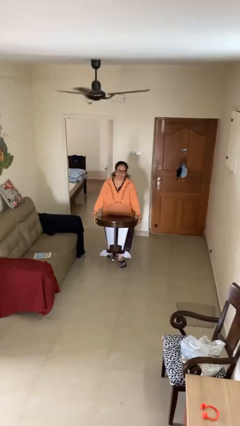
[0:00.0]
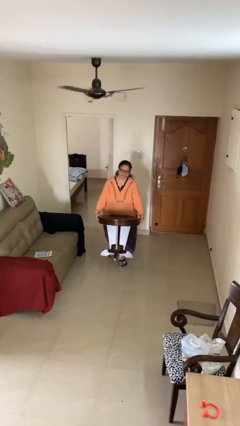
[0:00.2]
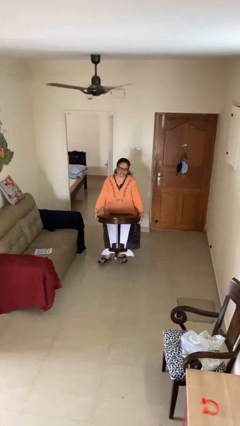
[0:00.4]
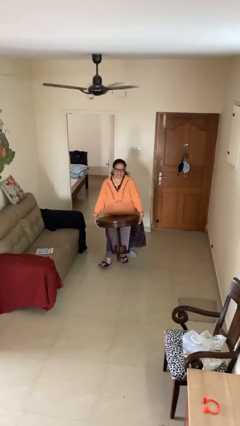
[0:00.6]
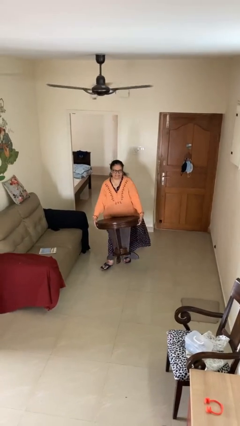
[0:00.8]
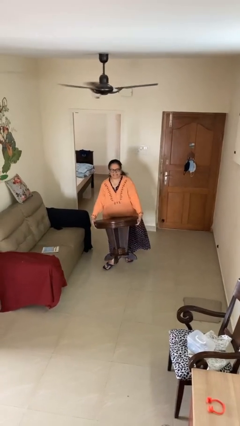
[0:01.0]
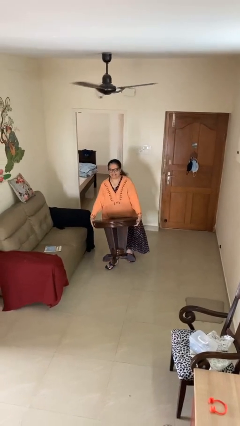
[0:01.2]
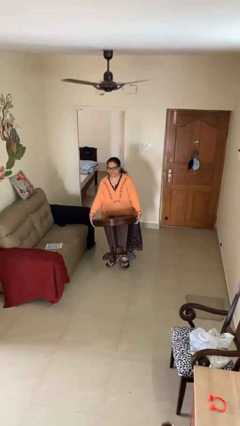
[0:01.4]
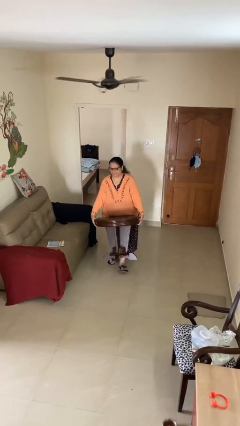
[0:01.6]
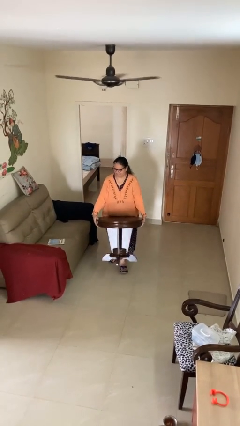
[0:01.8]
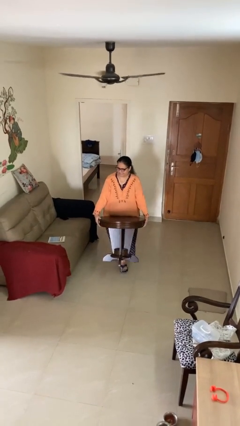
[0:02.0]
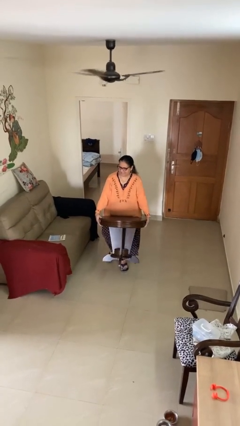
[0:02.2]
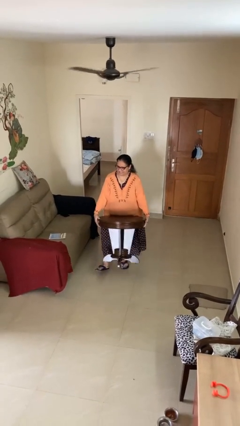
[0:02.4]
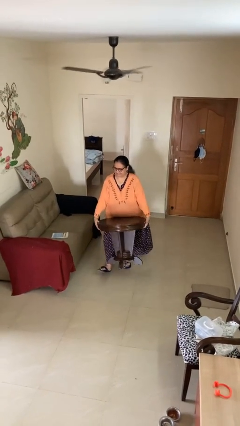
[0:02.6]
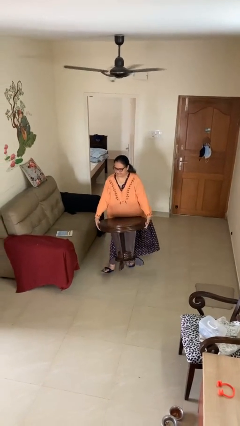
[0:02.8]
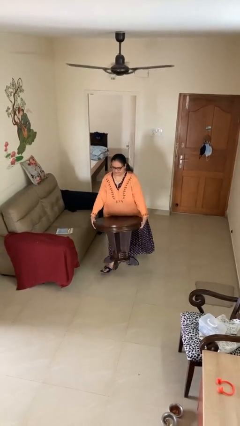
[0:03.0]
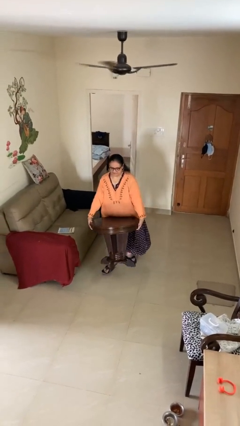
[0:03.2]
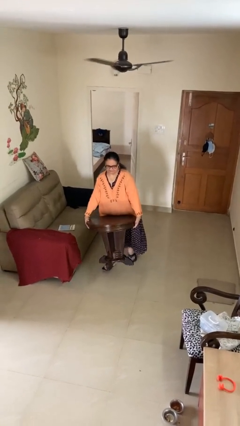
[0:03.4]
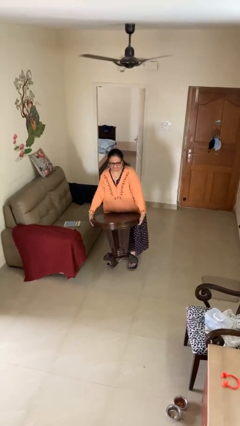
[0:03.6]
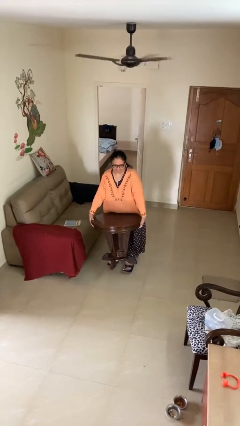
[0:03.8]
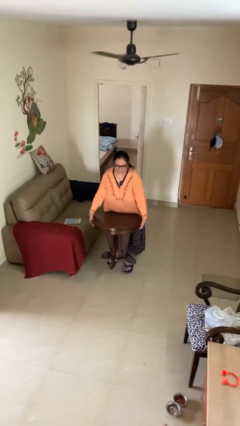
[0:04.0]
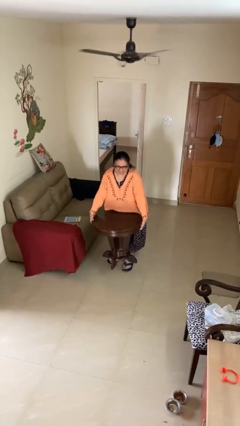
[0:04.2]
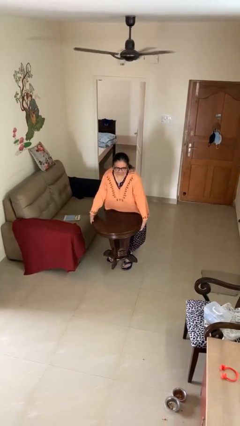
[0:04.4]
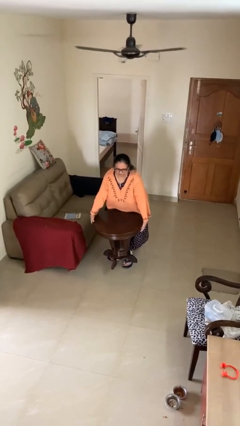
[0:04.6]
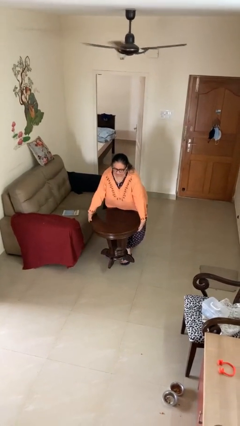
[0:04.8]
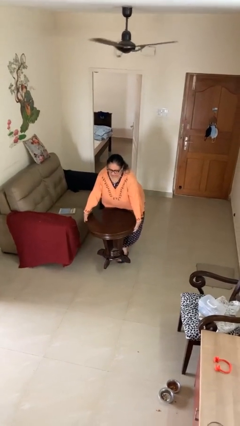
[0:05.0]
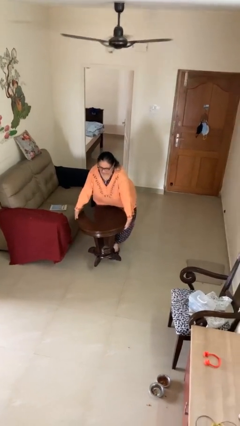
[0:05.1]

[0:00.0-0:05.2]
person carries heavy object

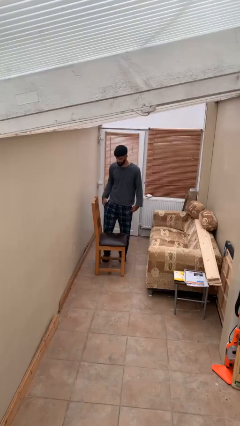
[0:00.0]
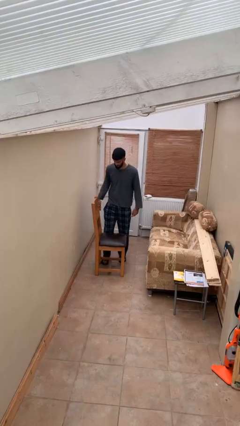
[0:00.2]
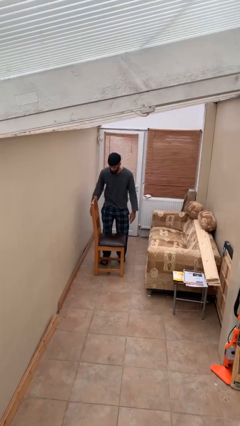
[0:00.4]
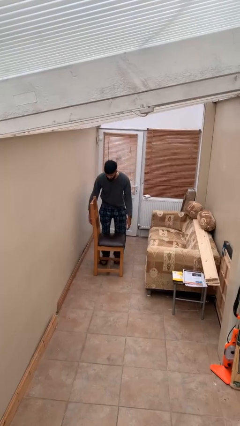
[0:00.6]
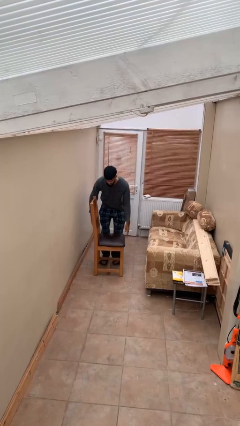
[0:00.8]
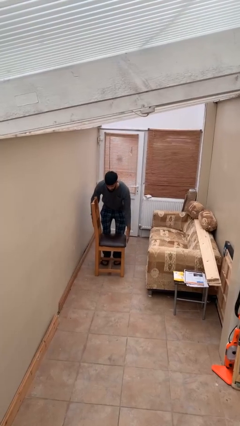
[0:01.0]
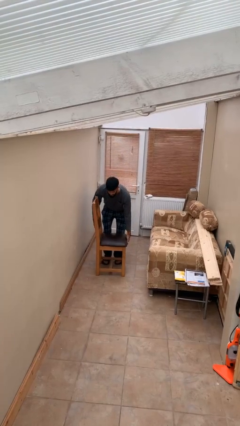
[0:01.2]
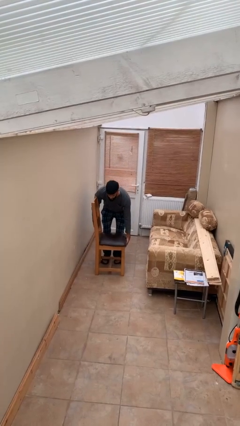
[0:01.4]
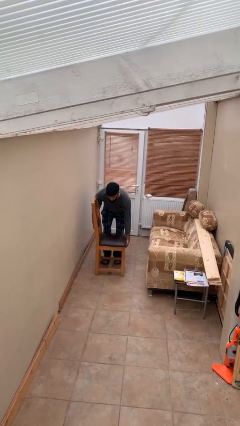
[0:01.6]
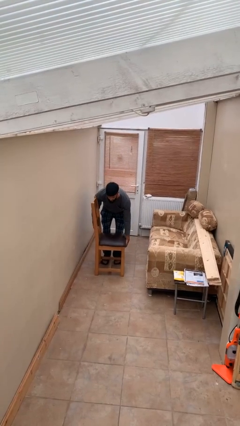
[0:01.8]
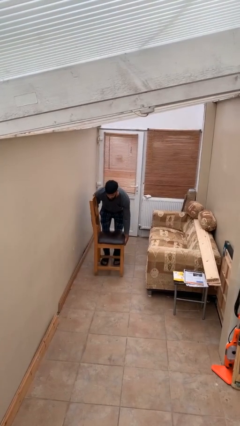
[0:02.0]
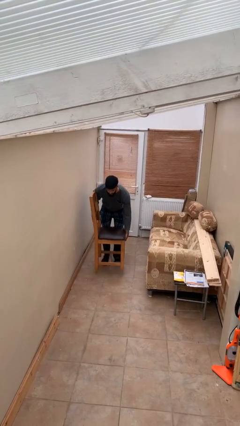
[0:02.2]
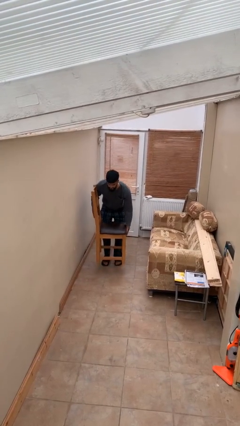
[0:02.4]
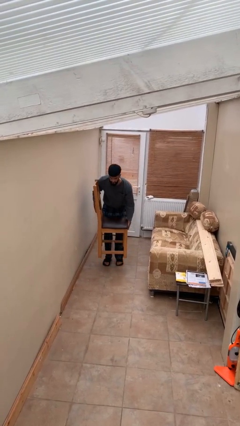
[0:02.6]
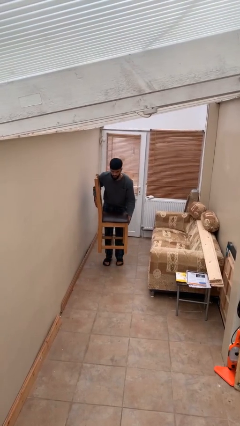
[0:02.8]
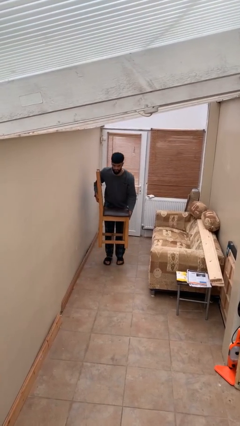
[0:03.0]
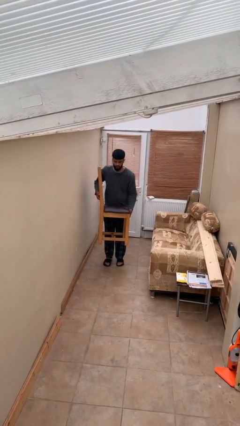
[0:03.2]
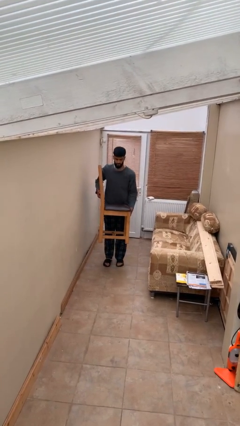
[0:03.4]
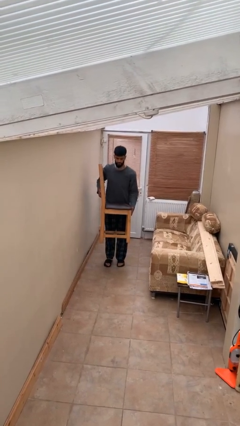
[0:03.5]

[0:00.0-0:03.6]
person picks up object from floor

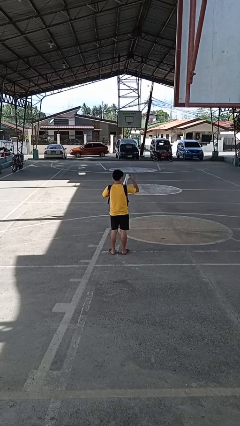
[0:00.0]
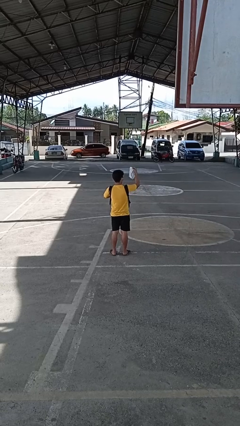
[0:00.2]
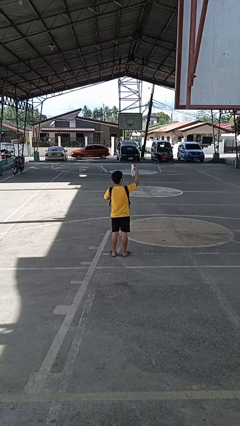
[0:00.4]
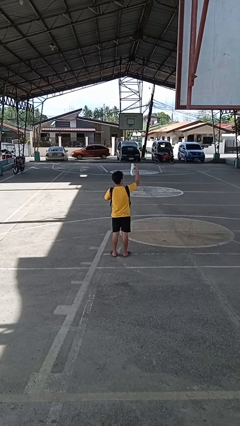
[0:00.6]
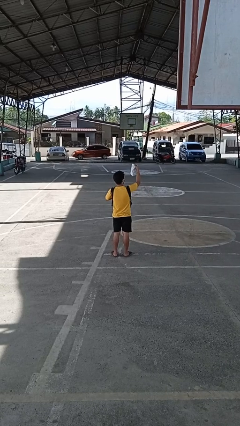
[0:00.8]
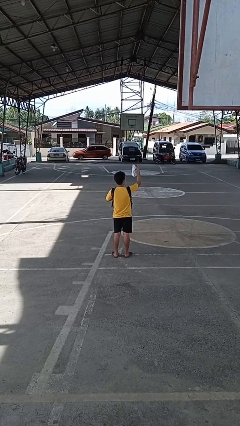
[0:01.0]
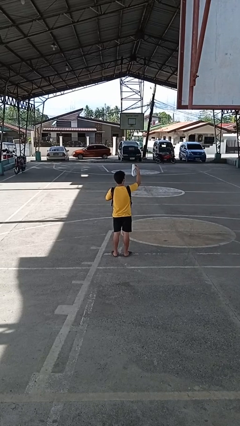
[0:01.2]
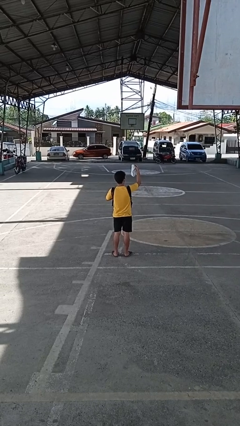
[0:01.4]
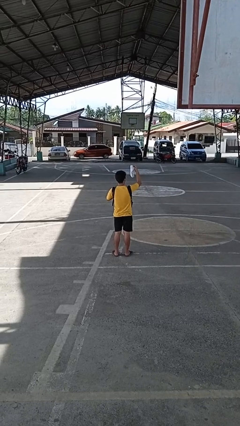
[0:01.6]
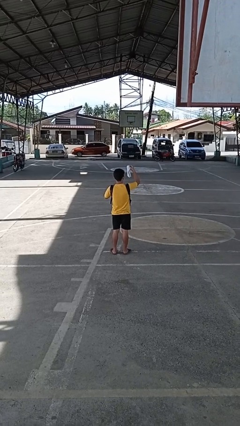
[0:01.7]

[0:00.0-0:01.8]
person takes object from backpack

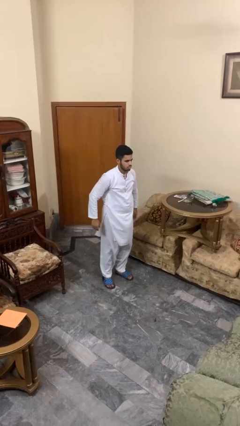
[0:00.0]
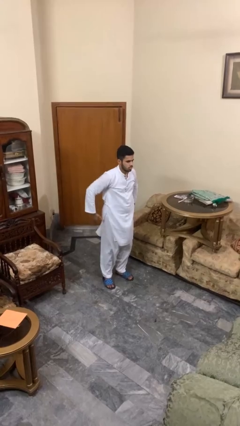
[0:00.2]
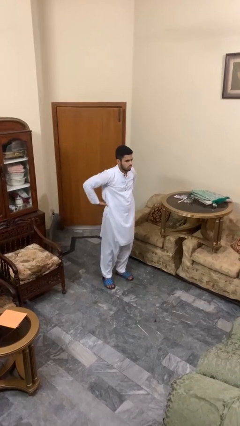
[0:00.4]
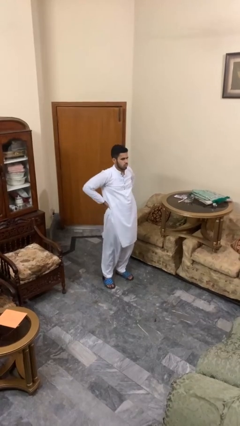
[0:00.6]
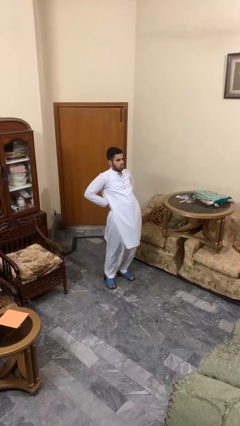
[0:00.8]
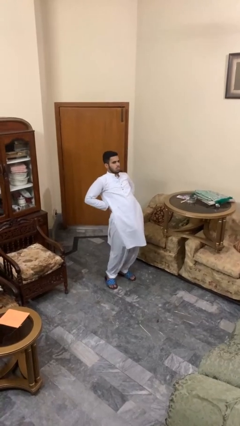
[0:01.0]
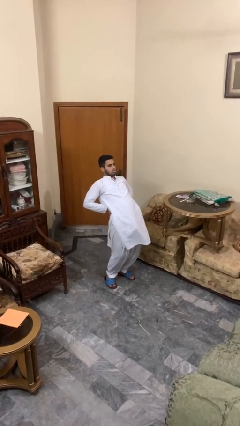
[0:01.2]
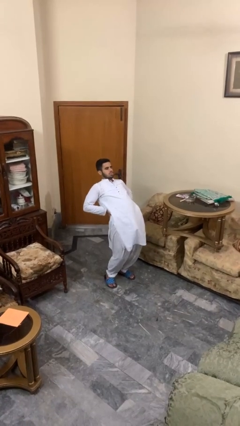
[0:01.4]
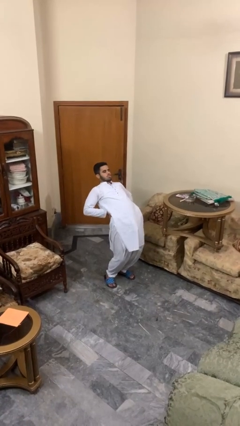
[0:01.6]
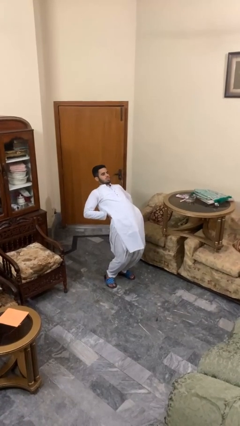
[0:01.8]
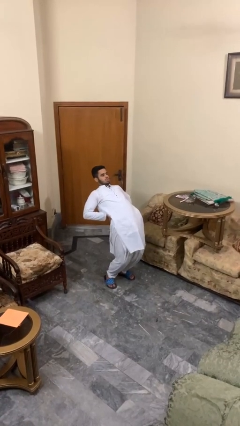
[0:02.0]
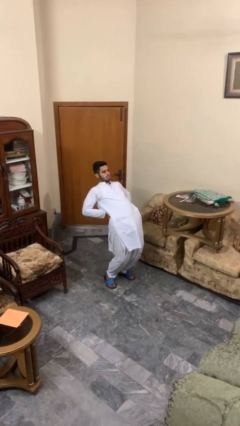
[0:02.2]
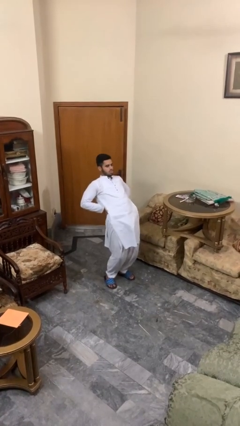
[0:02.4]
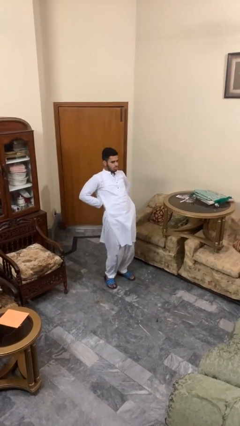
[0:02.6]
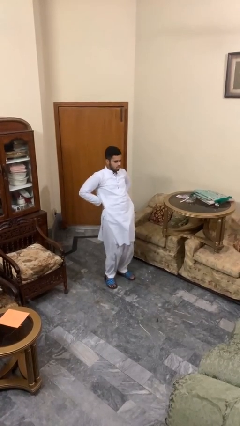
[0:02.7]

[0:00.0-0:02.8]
person stretches back

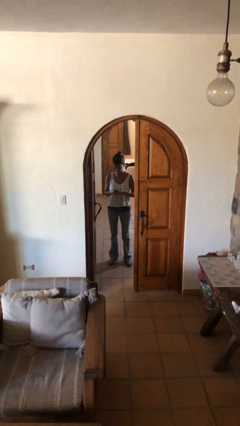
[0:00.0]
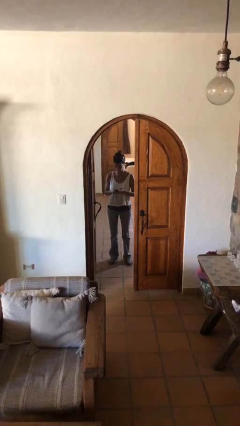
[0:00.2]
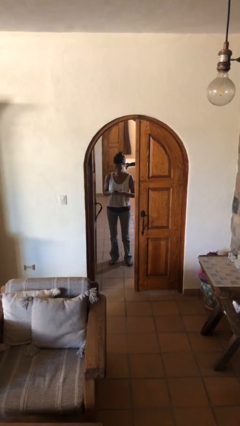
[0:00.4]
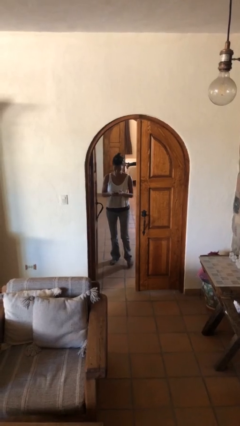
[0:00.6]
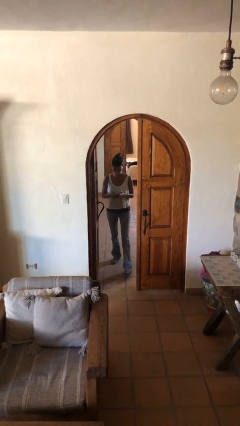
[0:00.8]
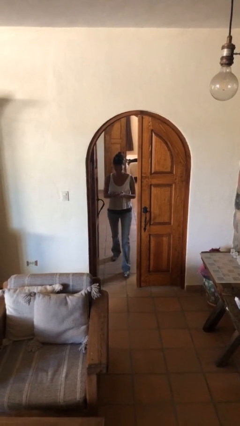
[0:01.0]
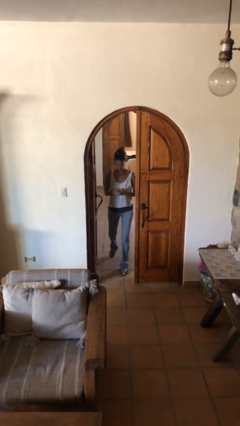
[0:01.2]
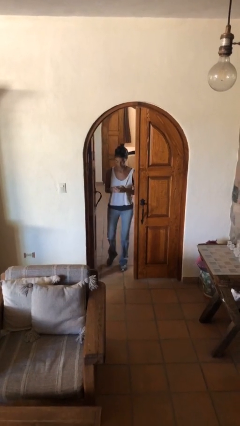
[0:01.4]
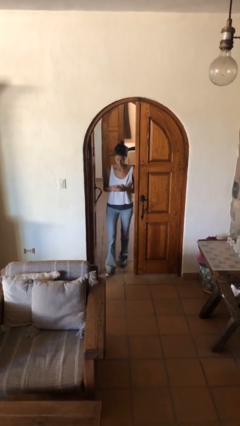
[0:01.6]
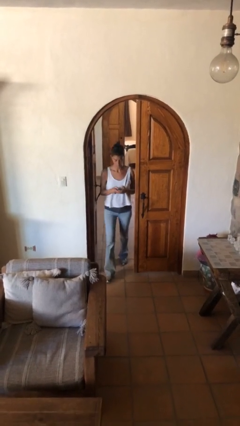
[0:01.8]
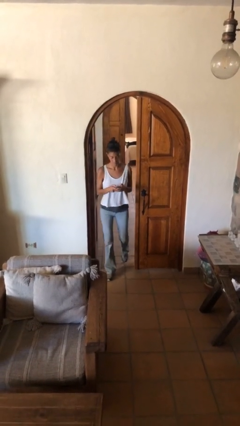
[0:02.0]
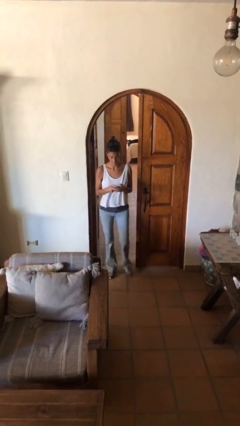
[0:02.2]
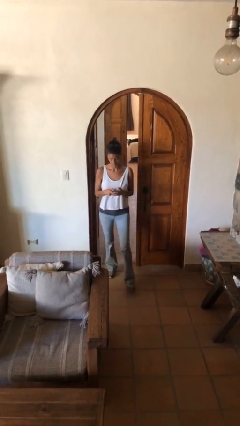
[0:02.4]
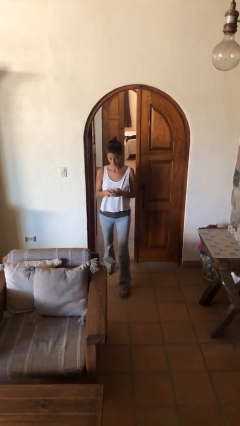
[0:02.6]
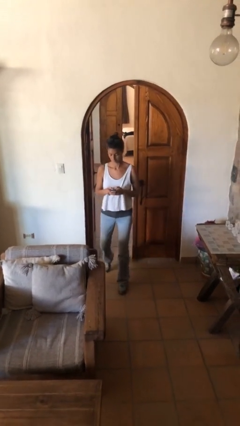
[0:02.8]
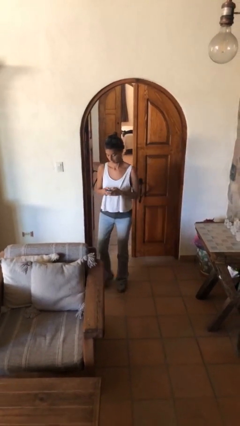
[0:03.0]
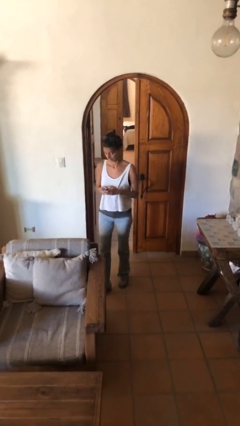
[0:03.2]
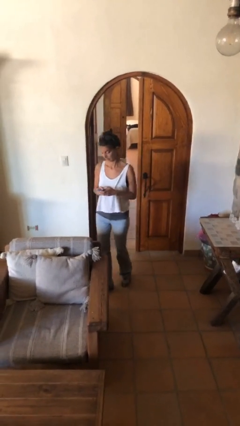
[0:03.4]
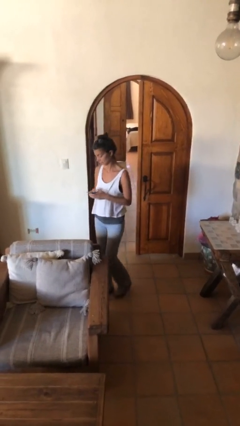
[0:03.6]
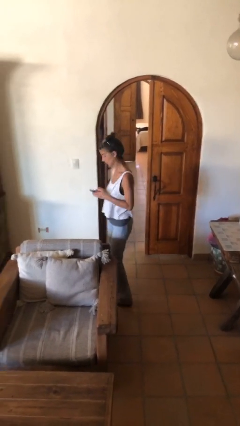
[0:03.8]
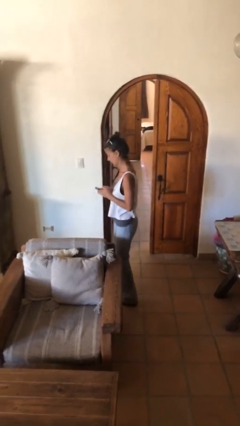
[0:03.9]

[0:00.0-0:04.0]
person enters scene through structure

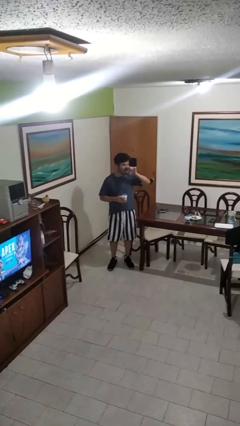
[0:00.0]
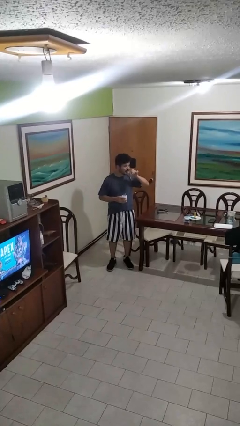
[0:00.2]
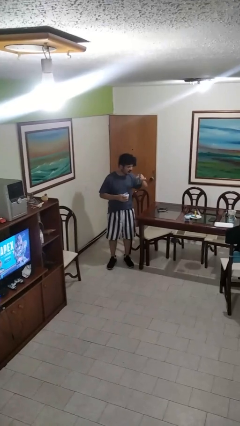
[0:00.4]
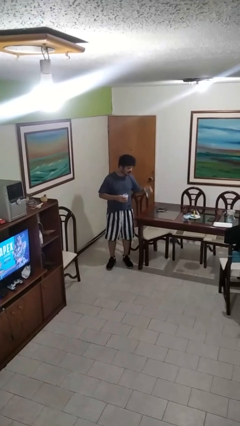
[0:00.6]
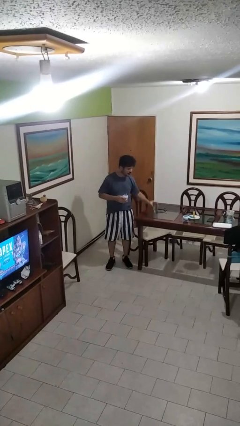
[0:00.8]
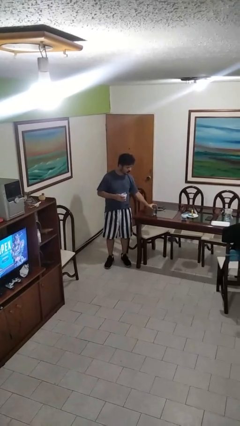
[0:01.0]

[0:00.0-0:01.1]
person drinks from cup
